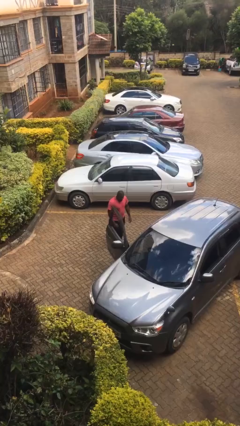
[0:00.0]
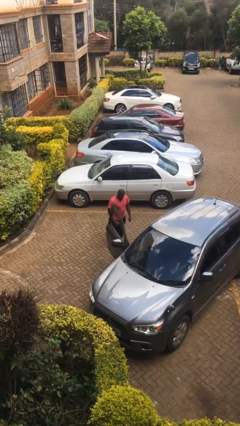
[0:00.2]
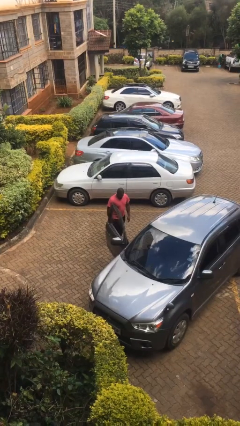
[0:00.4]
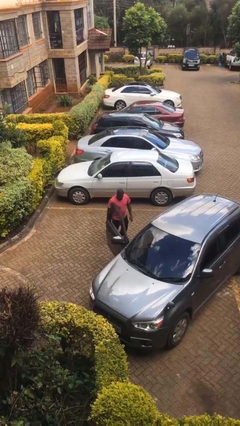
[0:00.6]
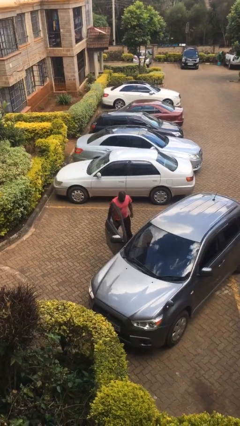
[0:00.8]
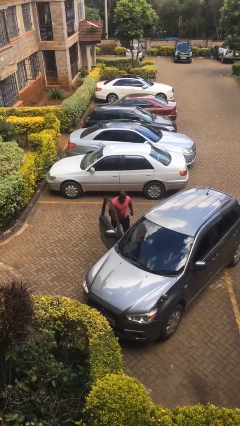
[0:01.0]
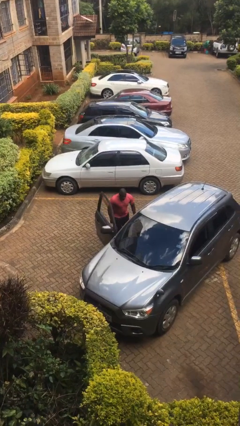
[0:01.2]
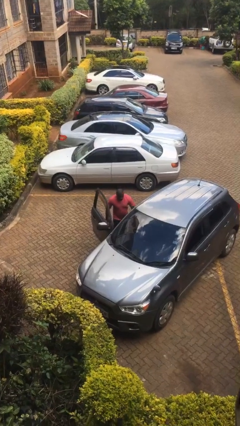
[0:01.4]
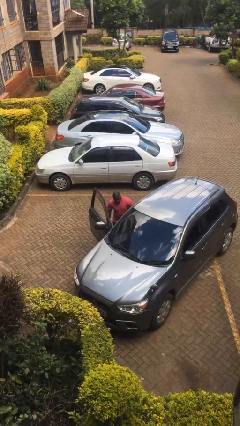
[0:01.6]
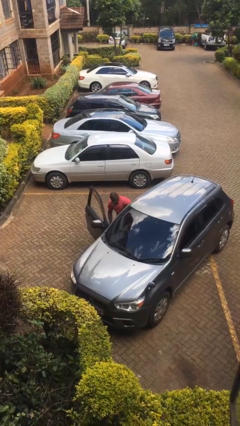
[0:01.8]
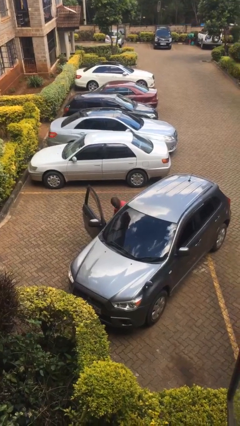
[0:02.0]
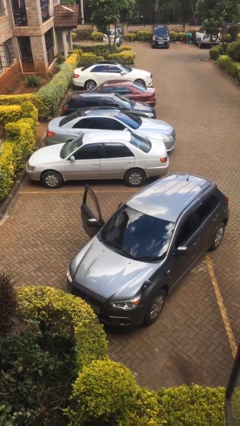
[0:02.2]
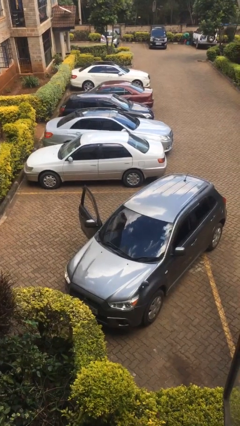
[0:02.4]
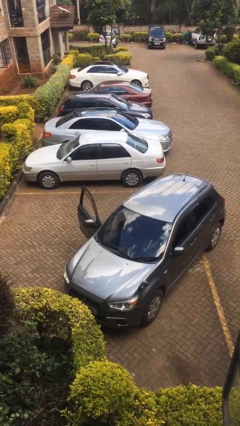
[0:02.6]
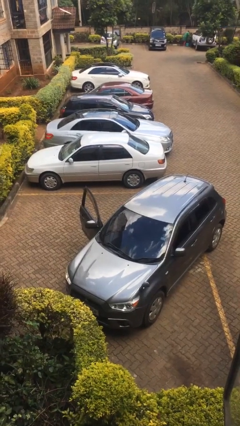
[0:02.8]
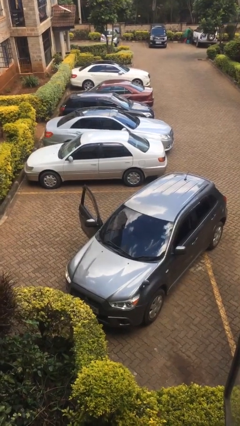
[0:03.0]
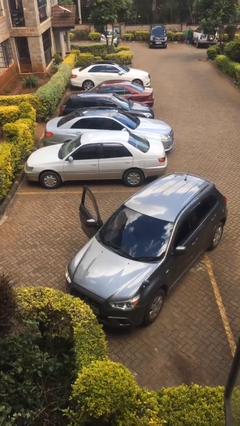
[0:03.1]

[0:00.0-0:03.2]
person enters car

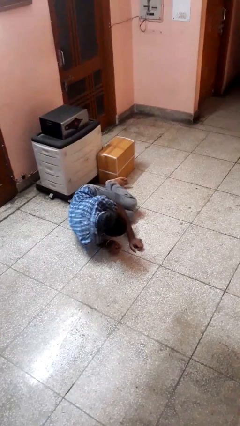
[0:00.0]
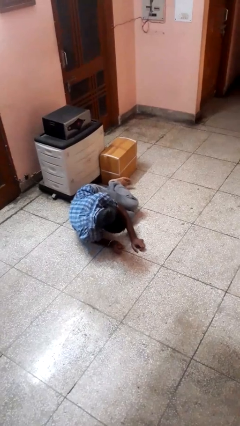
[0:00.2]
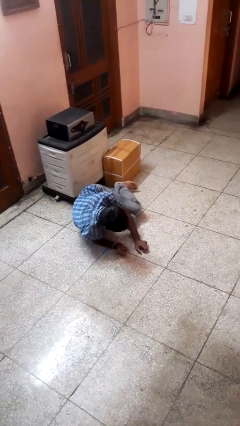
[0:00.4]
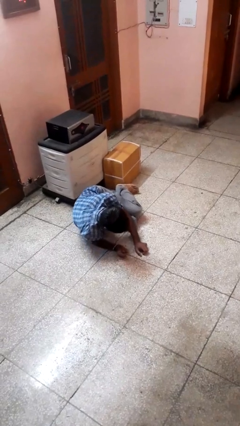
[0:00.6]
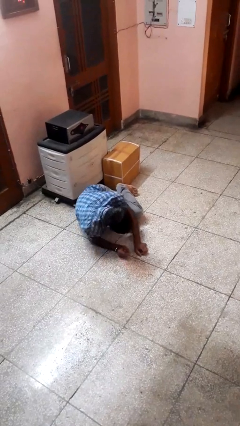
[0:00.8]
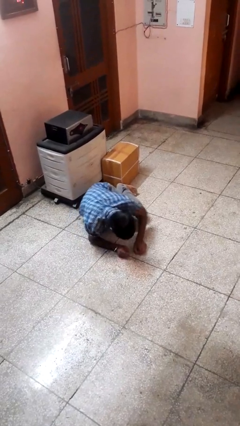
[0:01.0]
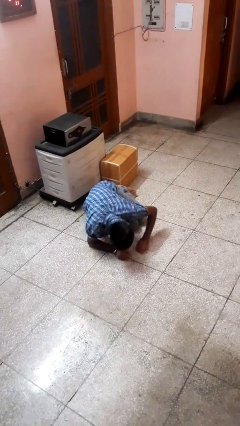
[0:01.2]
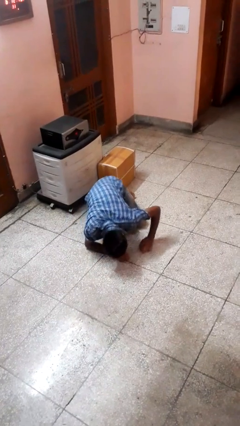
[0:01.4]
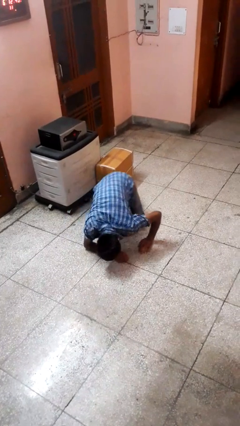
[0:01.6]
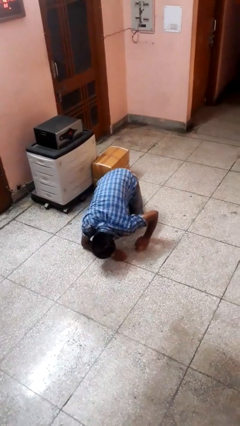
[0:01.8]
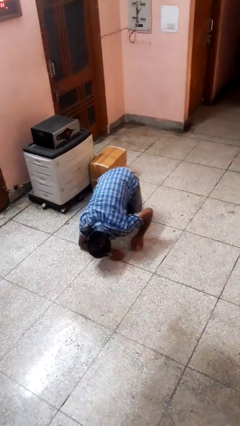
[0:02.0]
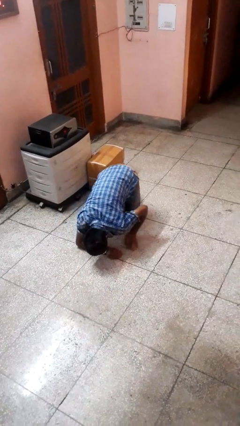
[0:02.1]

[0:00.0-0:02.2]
person lies down on floor

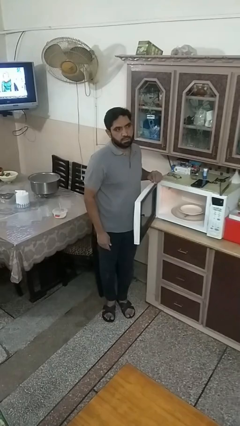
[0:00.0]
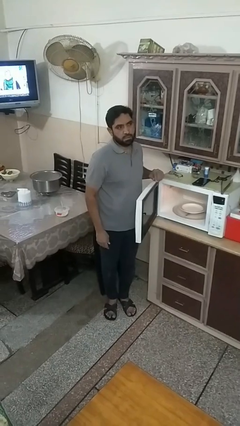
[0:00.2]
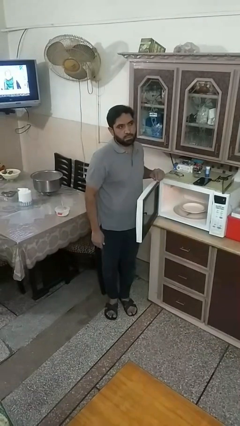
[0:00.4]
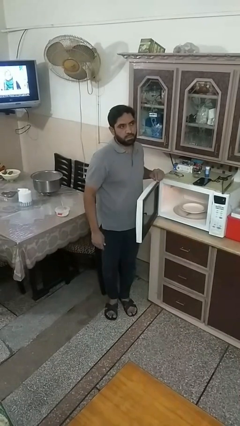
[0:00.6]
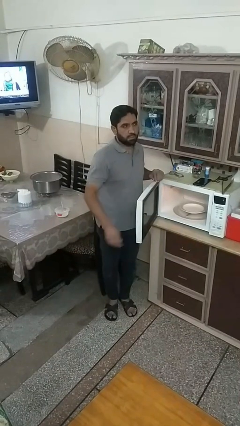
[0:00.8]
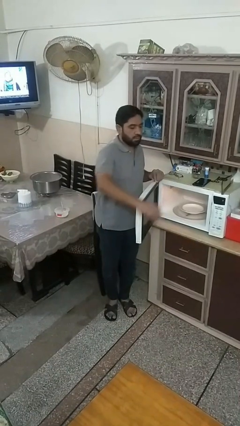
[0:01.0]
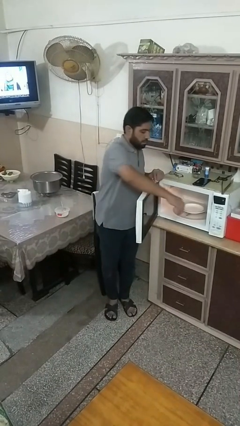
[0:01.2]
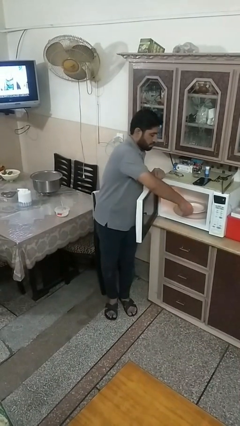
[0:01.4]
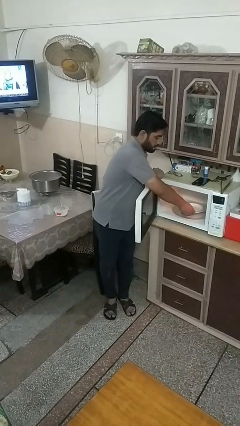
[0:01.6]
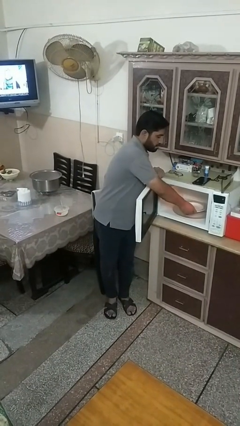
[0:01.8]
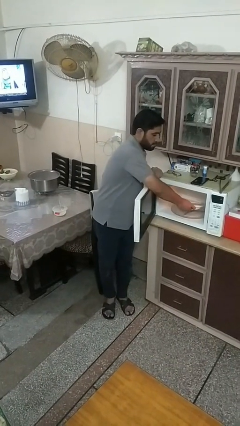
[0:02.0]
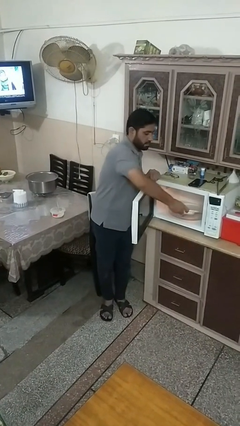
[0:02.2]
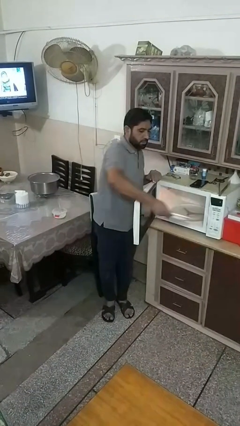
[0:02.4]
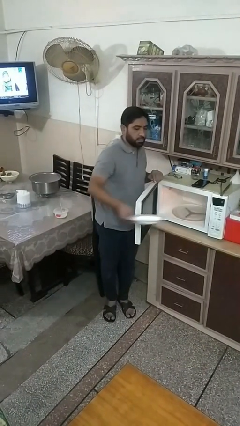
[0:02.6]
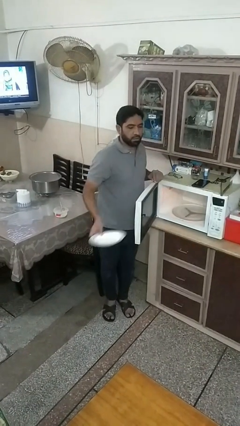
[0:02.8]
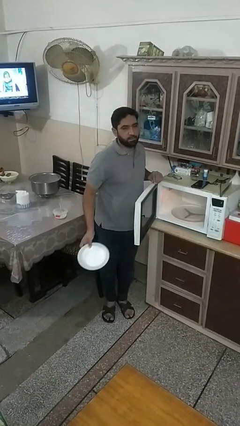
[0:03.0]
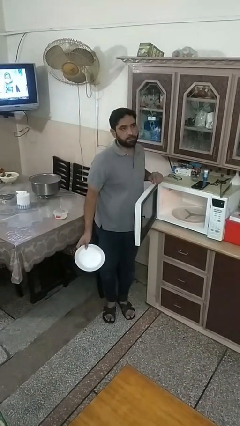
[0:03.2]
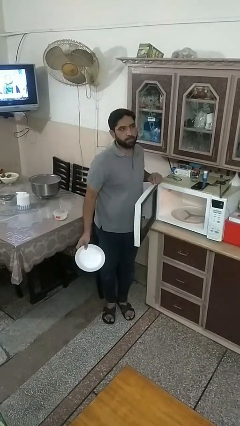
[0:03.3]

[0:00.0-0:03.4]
person takes object from microwave

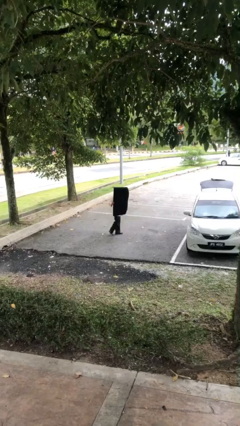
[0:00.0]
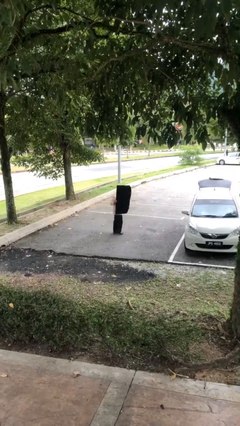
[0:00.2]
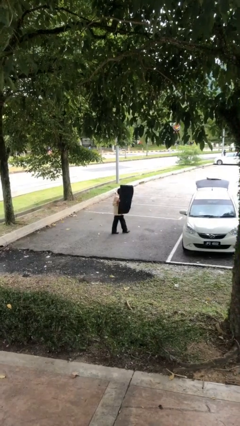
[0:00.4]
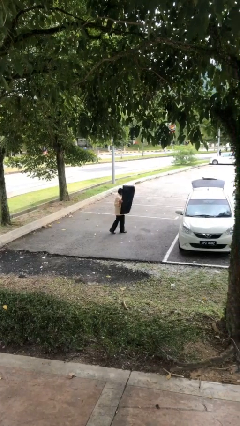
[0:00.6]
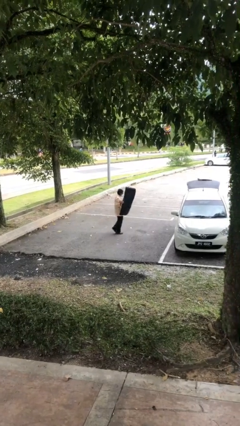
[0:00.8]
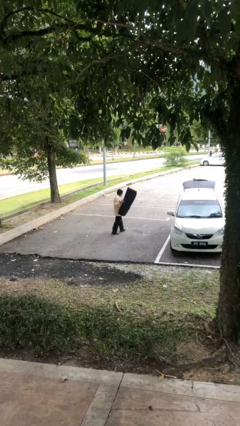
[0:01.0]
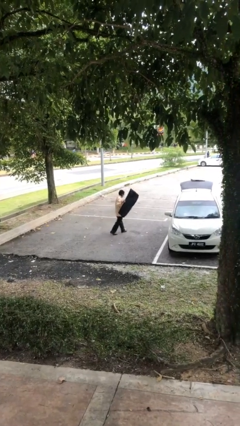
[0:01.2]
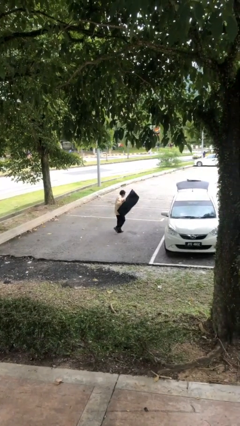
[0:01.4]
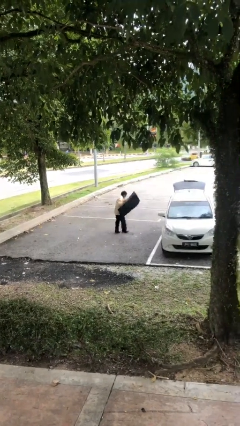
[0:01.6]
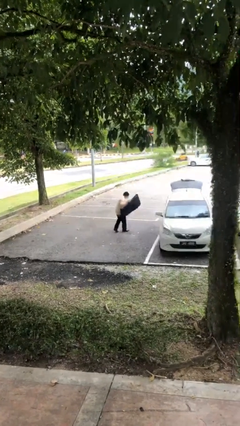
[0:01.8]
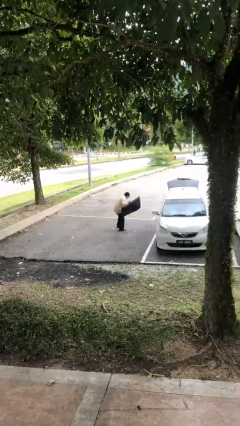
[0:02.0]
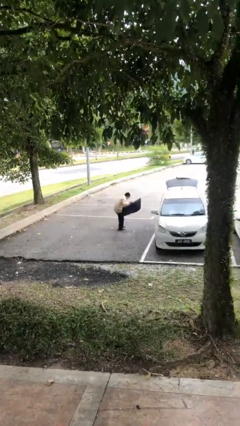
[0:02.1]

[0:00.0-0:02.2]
person carries heavy object

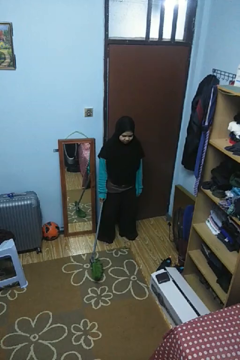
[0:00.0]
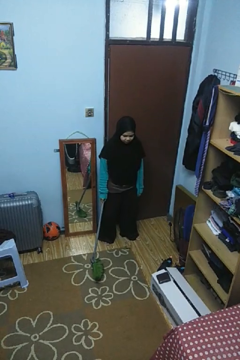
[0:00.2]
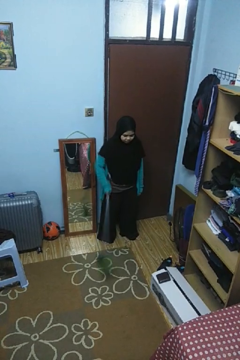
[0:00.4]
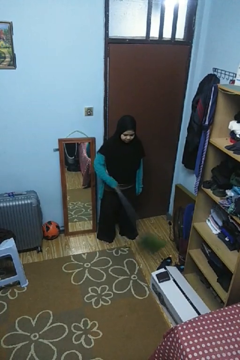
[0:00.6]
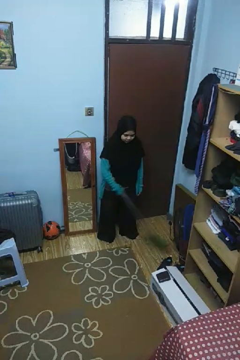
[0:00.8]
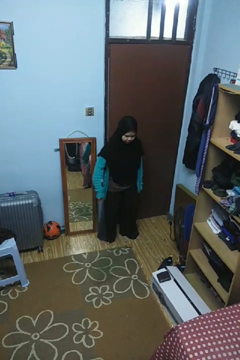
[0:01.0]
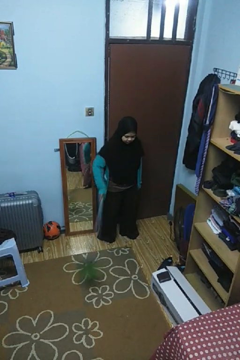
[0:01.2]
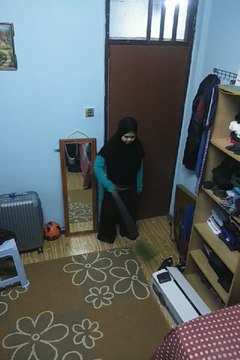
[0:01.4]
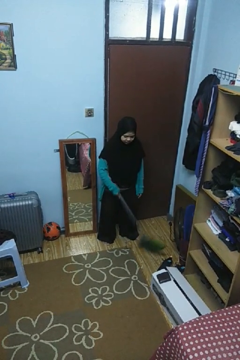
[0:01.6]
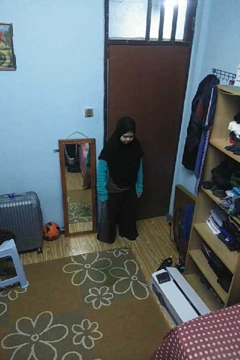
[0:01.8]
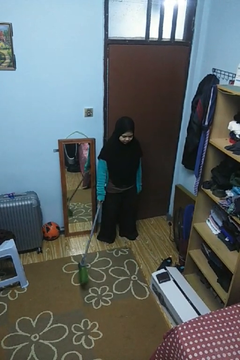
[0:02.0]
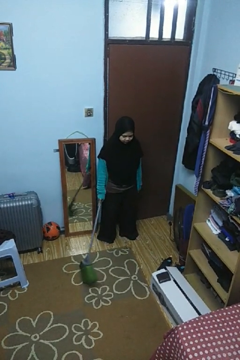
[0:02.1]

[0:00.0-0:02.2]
person sweeps floor

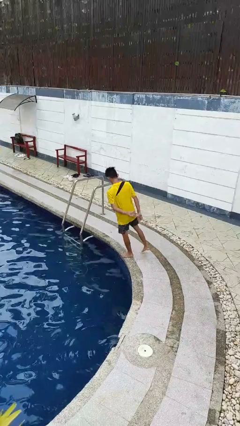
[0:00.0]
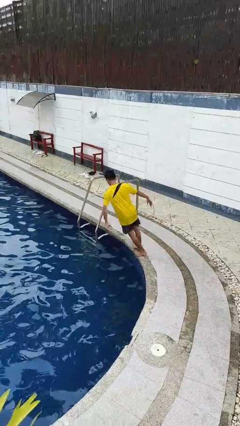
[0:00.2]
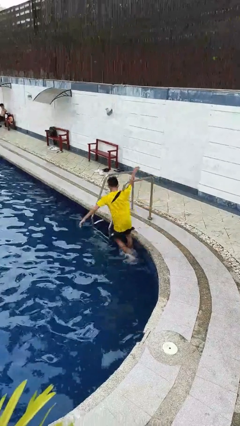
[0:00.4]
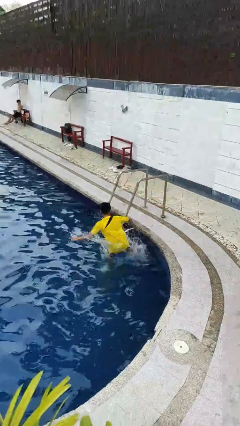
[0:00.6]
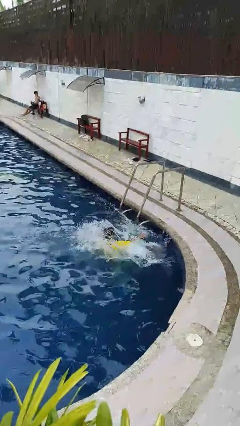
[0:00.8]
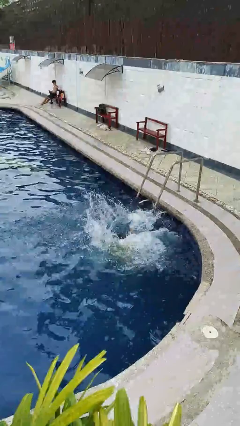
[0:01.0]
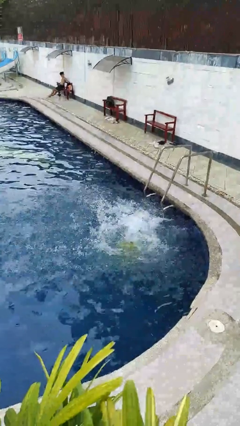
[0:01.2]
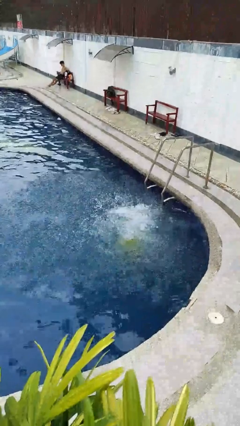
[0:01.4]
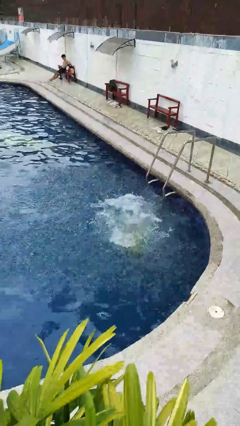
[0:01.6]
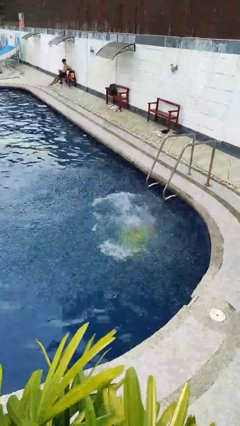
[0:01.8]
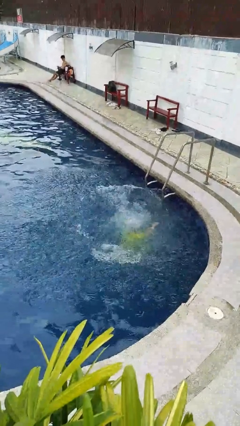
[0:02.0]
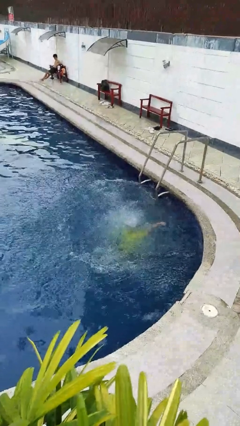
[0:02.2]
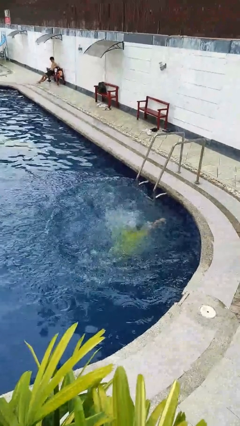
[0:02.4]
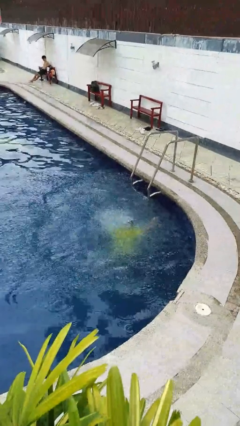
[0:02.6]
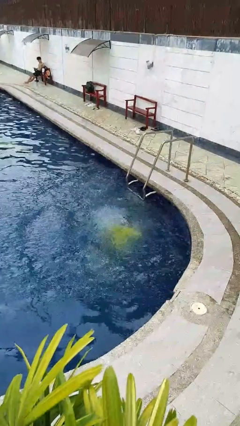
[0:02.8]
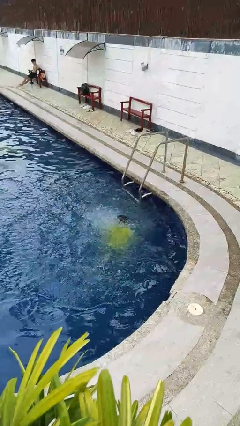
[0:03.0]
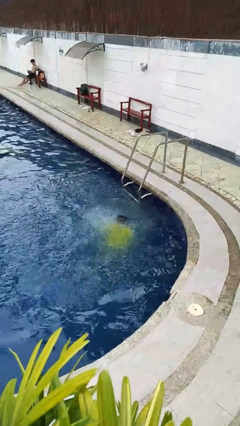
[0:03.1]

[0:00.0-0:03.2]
person falls into pool

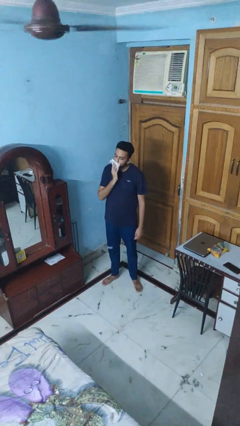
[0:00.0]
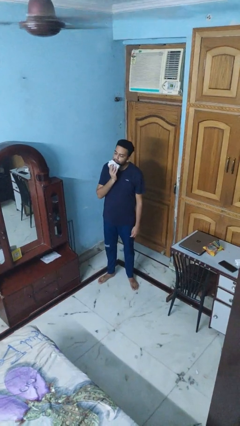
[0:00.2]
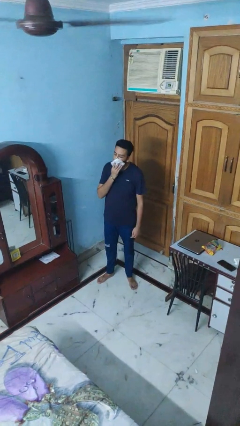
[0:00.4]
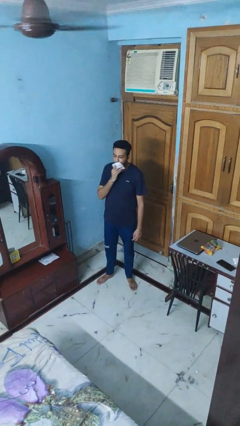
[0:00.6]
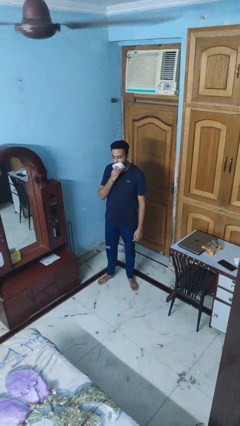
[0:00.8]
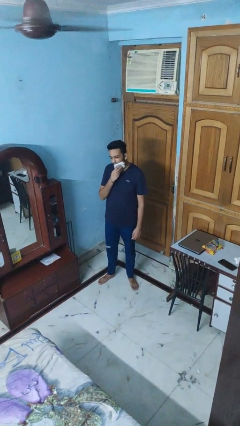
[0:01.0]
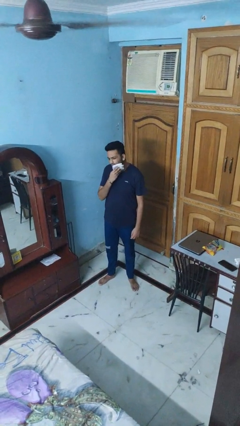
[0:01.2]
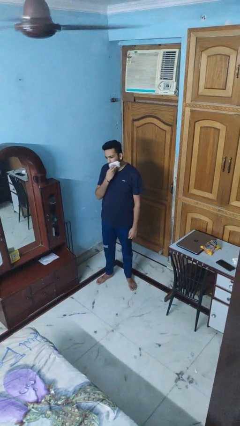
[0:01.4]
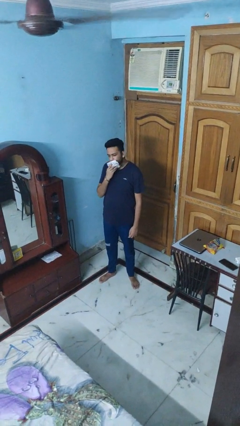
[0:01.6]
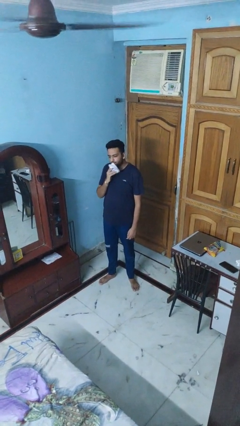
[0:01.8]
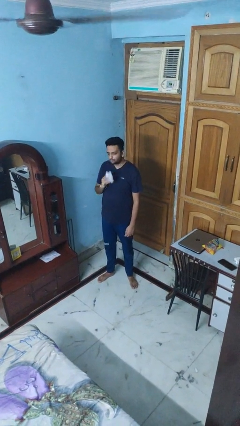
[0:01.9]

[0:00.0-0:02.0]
person wipes mouth with napkin
